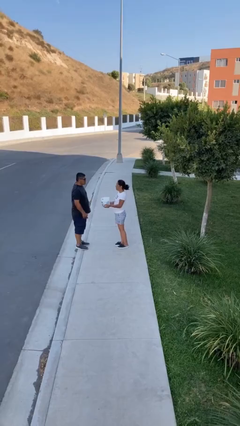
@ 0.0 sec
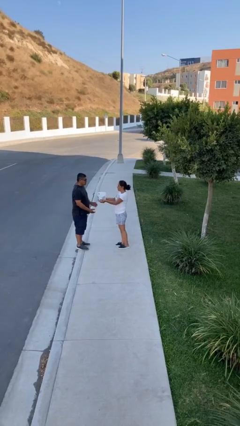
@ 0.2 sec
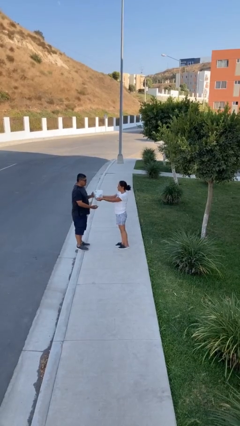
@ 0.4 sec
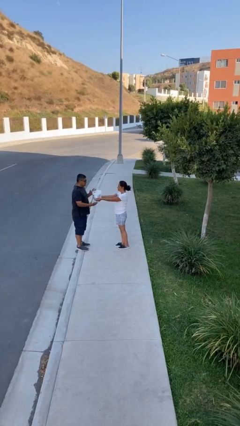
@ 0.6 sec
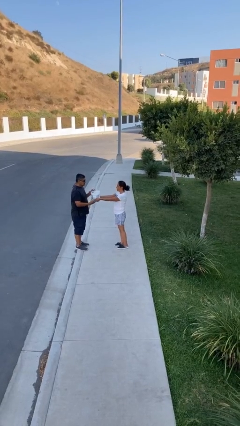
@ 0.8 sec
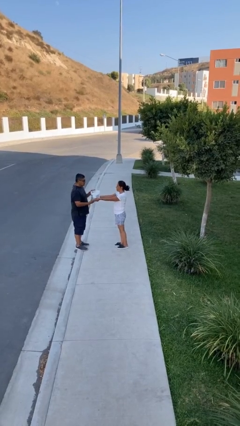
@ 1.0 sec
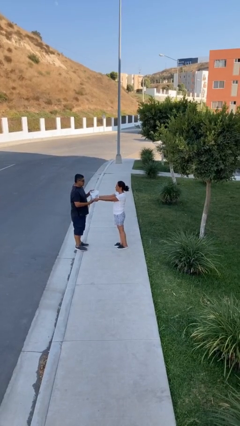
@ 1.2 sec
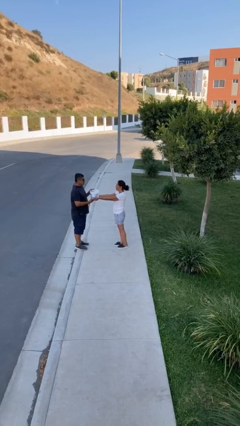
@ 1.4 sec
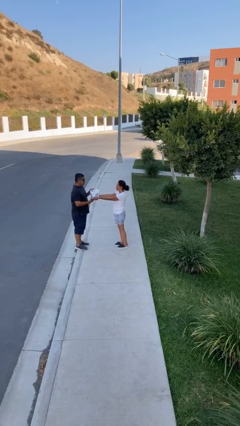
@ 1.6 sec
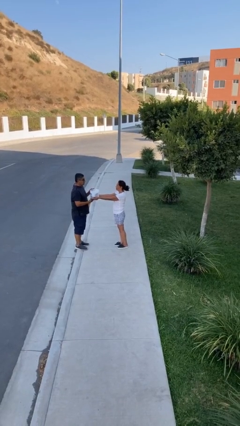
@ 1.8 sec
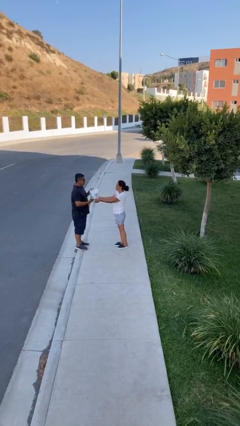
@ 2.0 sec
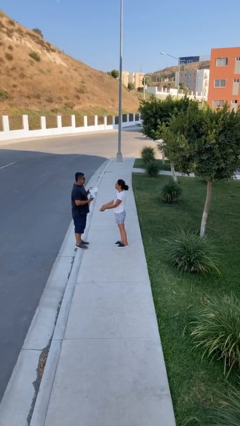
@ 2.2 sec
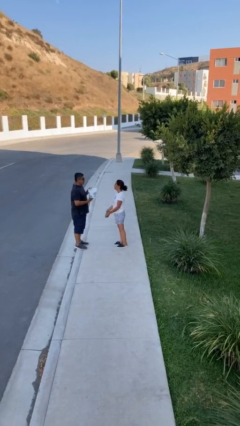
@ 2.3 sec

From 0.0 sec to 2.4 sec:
person transfers object to person

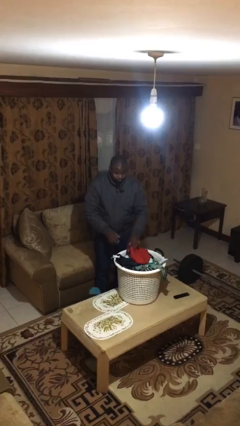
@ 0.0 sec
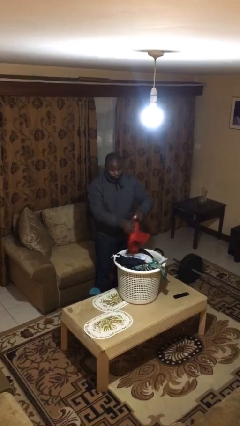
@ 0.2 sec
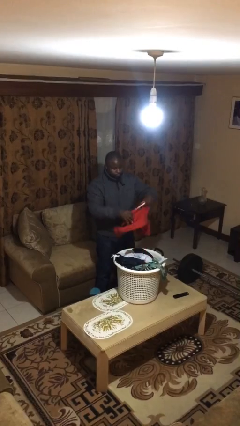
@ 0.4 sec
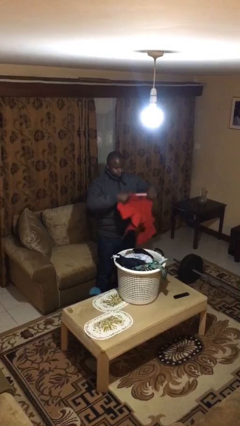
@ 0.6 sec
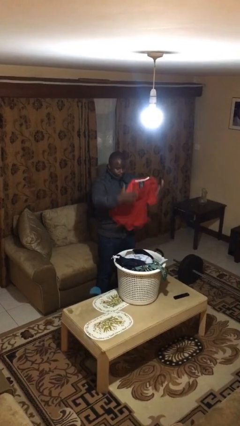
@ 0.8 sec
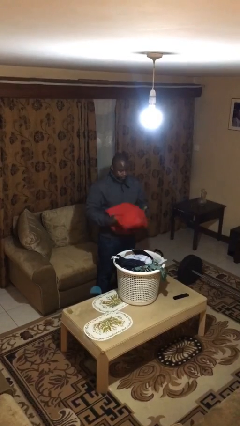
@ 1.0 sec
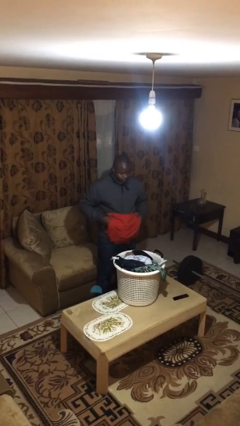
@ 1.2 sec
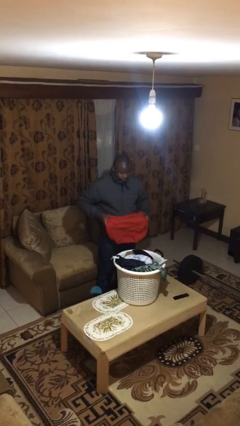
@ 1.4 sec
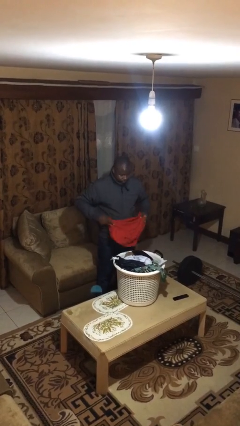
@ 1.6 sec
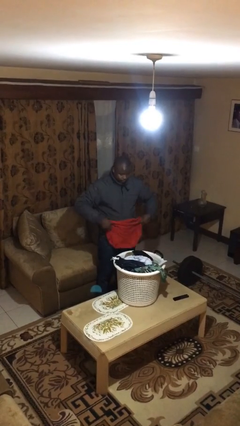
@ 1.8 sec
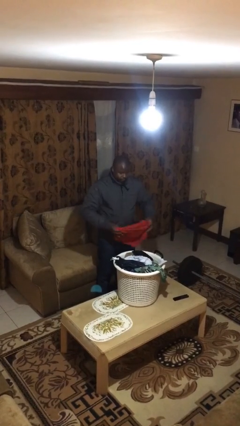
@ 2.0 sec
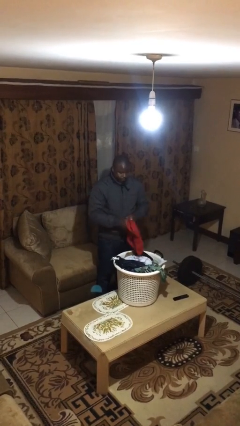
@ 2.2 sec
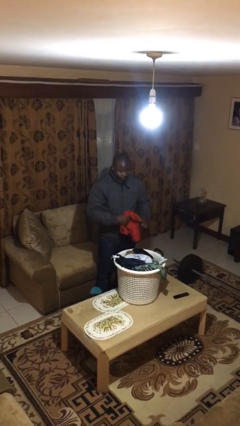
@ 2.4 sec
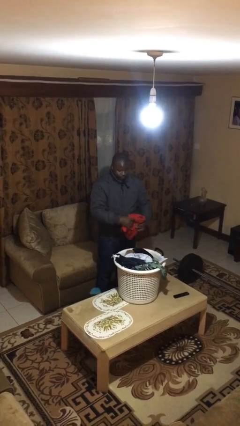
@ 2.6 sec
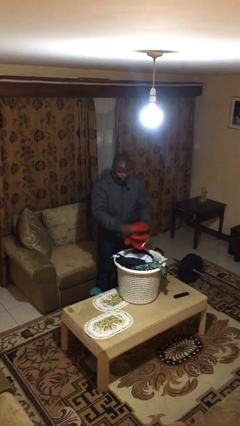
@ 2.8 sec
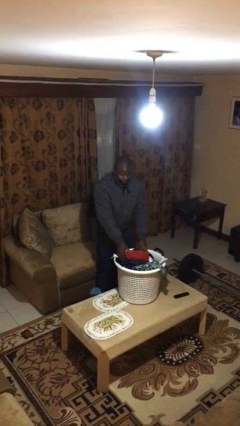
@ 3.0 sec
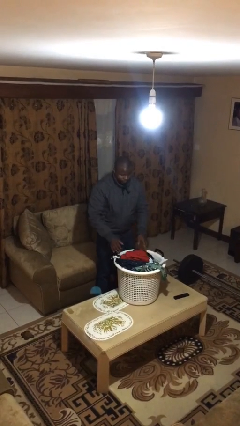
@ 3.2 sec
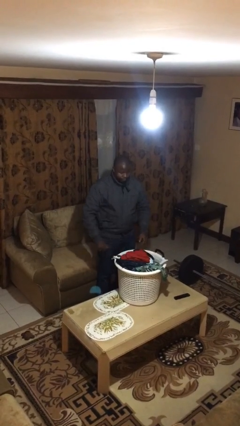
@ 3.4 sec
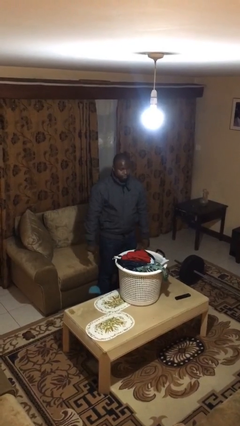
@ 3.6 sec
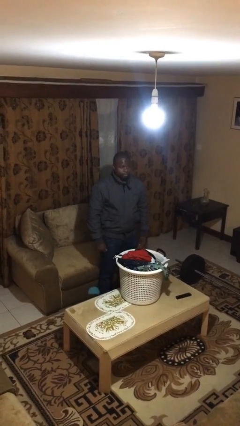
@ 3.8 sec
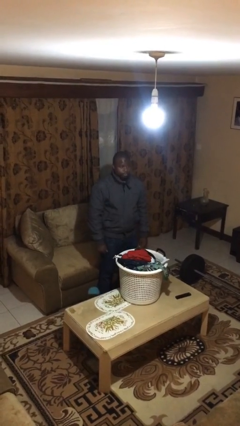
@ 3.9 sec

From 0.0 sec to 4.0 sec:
person folds shirt

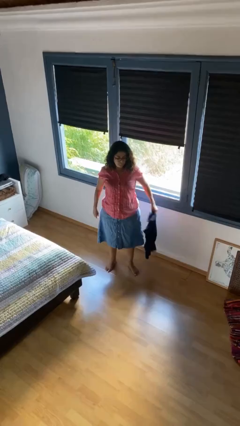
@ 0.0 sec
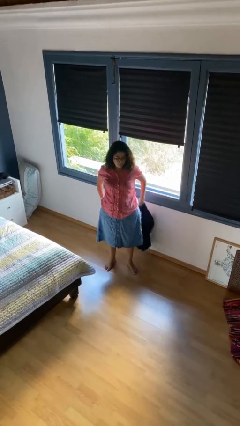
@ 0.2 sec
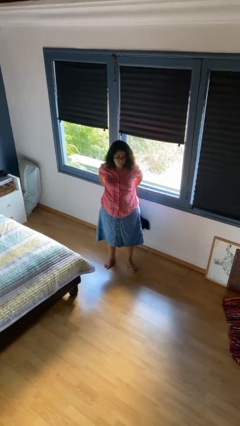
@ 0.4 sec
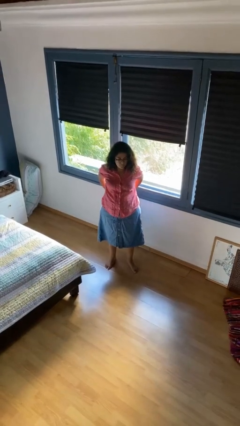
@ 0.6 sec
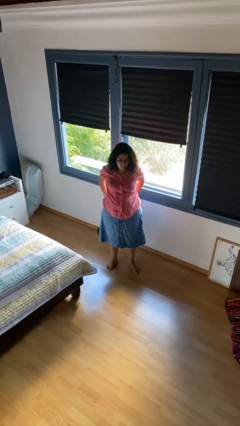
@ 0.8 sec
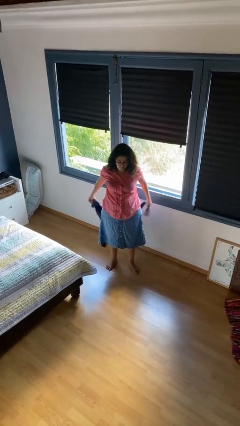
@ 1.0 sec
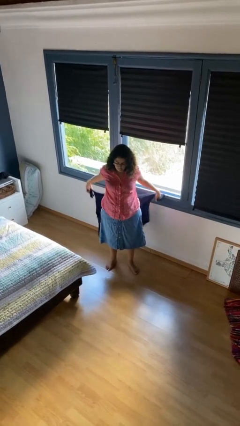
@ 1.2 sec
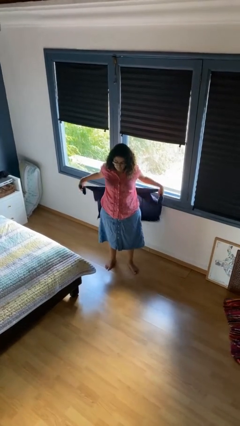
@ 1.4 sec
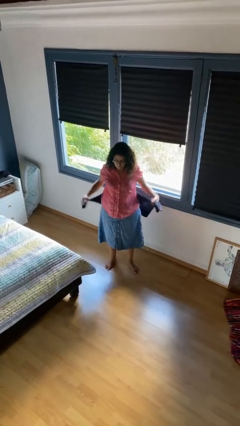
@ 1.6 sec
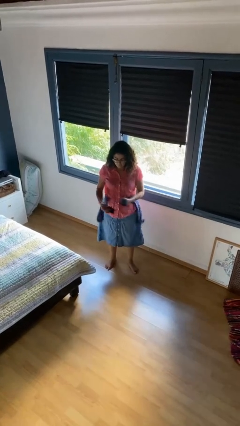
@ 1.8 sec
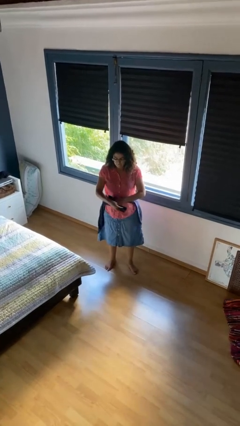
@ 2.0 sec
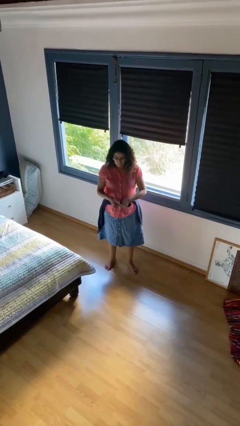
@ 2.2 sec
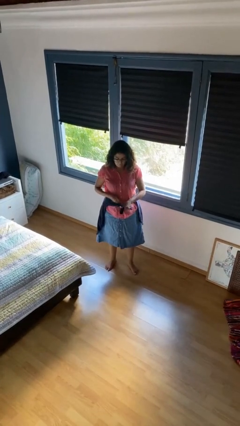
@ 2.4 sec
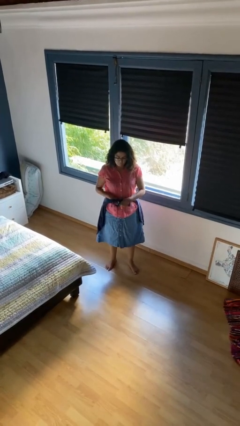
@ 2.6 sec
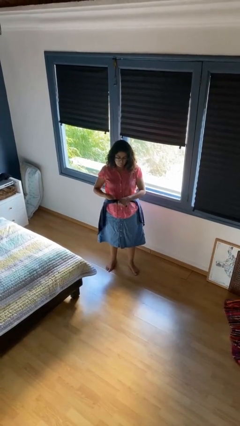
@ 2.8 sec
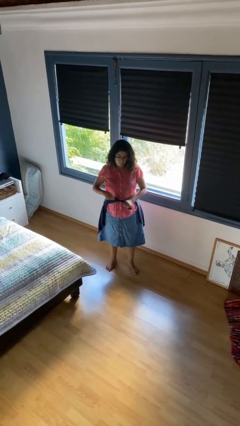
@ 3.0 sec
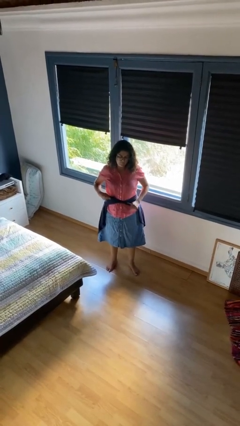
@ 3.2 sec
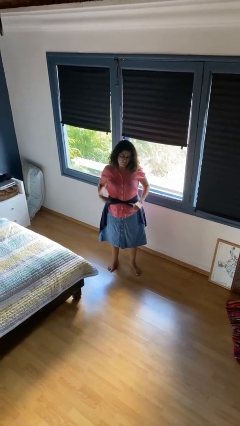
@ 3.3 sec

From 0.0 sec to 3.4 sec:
person ties jacket around waist

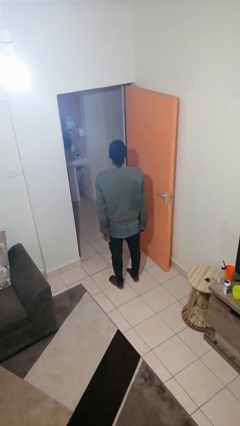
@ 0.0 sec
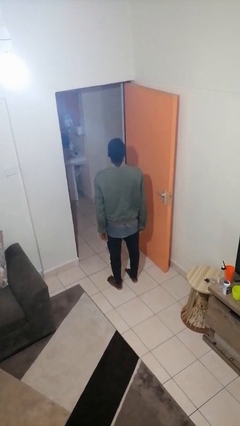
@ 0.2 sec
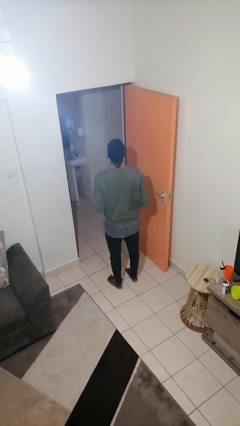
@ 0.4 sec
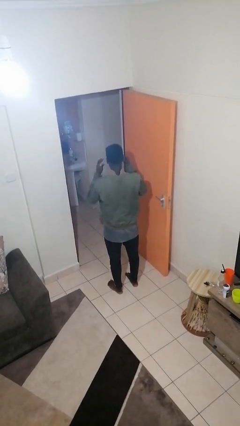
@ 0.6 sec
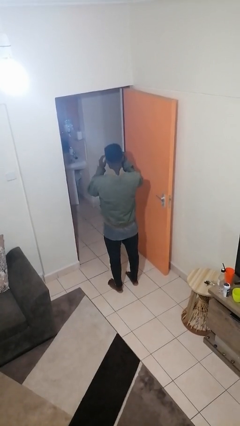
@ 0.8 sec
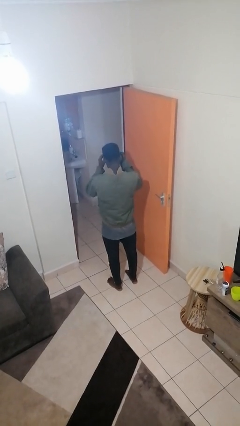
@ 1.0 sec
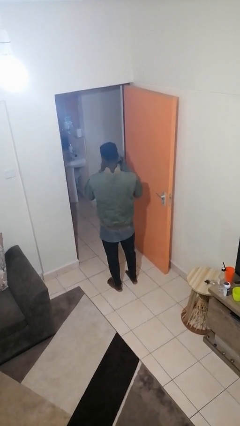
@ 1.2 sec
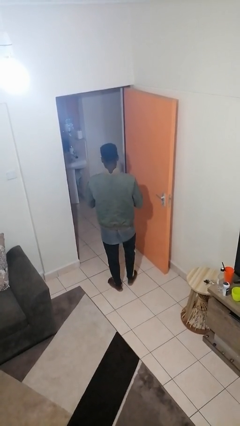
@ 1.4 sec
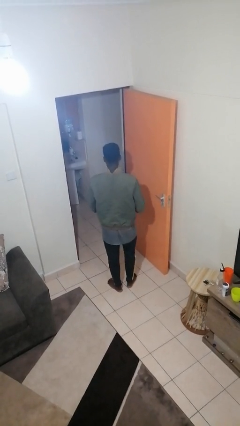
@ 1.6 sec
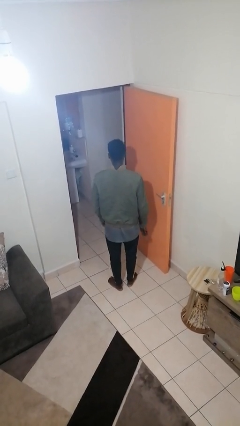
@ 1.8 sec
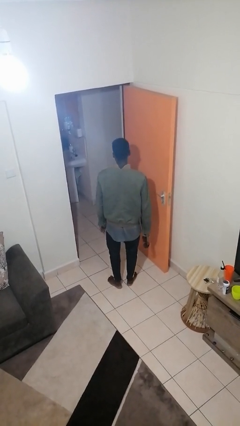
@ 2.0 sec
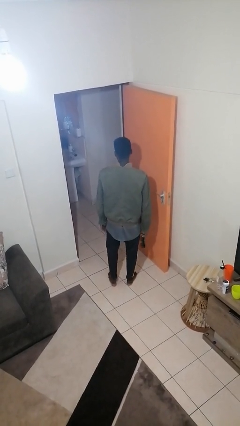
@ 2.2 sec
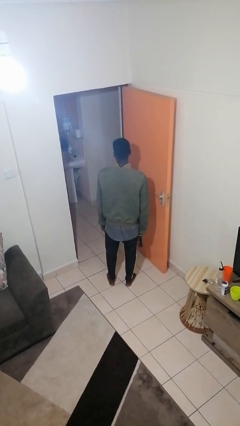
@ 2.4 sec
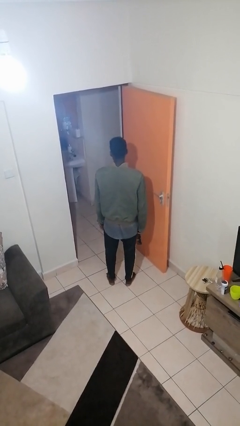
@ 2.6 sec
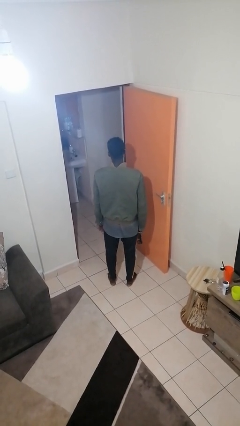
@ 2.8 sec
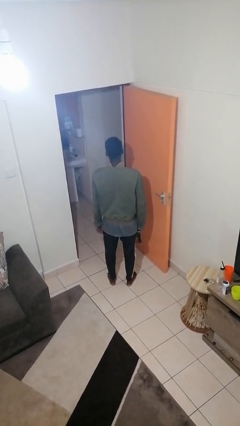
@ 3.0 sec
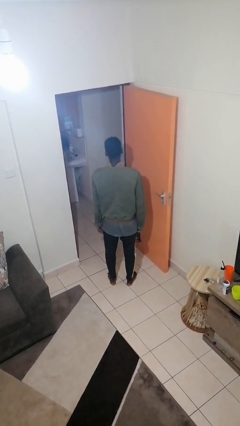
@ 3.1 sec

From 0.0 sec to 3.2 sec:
person takes off sunglasses

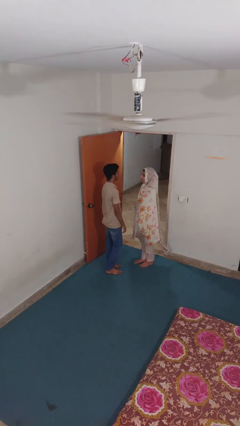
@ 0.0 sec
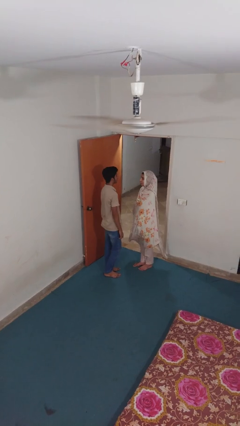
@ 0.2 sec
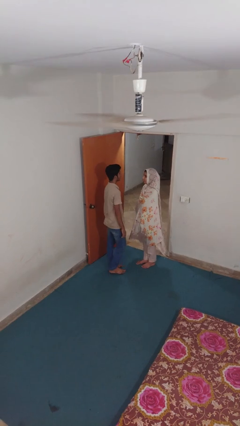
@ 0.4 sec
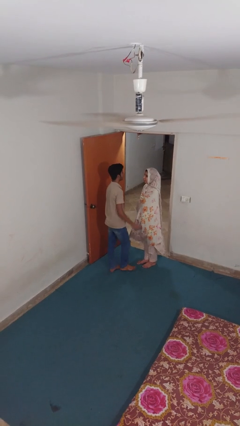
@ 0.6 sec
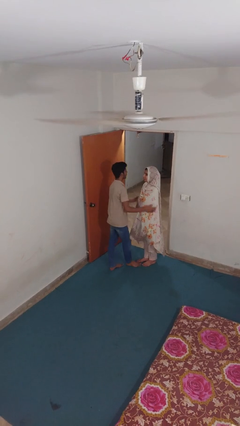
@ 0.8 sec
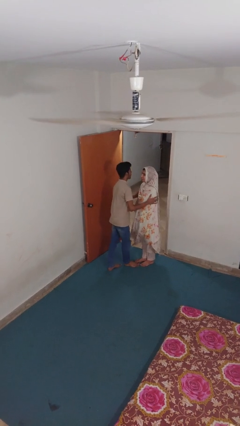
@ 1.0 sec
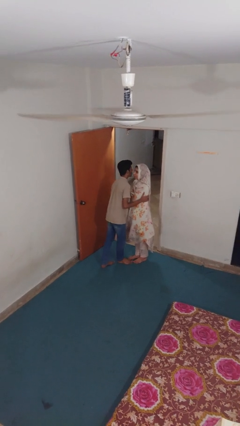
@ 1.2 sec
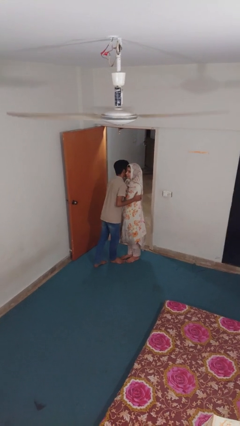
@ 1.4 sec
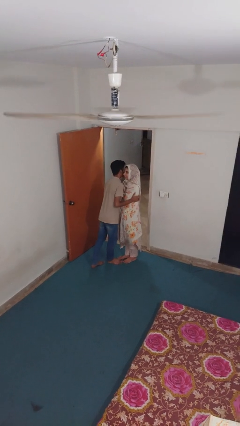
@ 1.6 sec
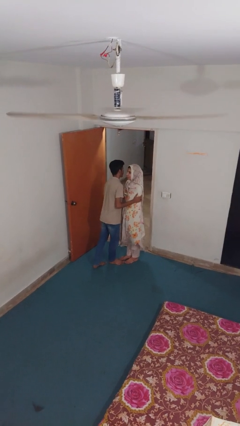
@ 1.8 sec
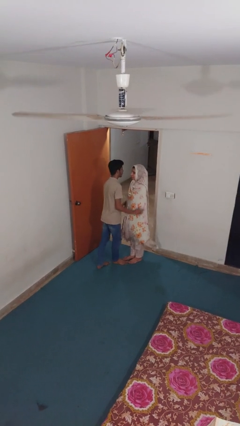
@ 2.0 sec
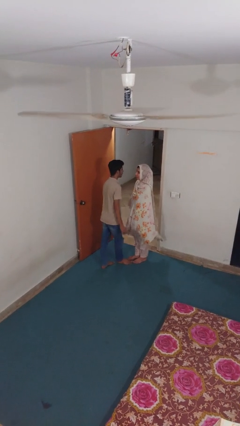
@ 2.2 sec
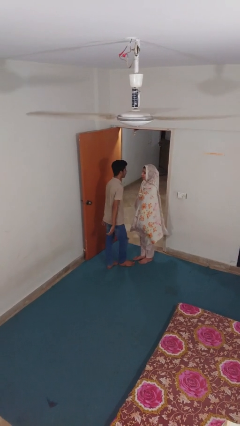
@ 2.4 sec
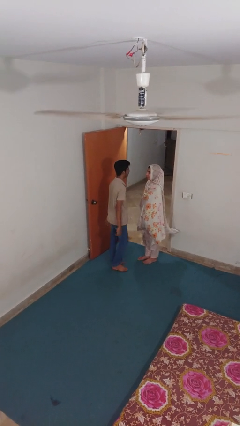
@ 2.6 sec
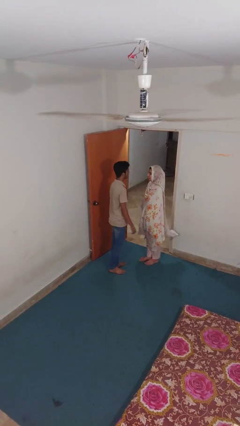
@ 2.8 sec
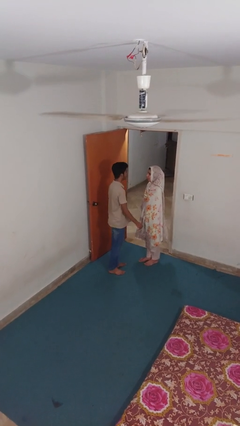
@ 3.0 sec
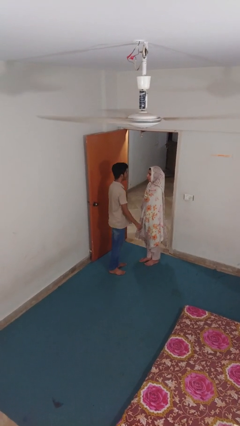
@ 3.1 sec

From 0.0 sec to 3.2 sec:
person kisses cheek of person

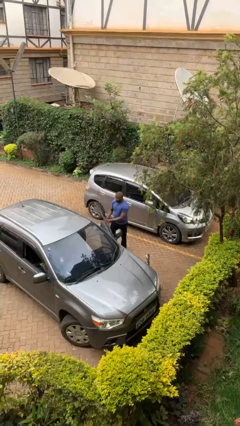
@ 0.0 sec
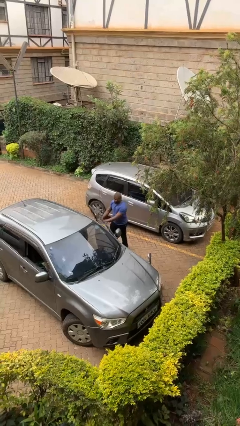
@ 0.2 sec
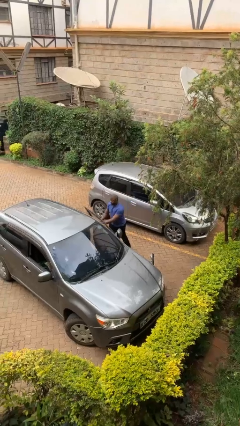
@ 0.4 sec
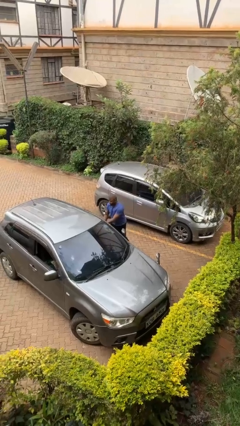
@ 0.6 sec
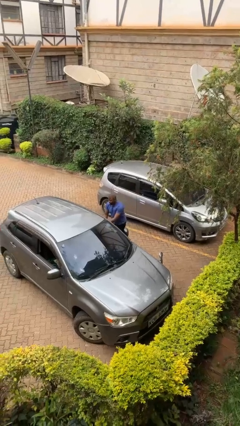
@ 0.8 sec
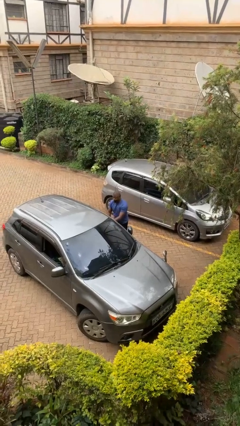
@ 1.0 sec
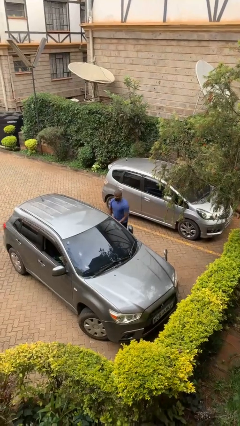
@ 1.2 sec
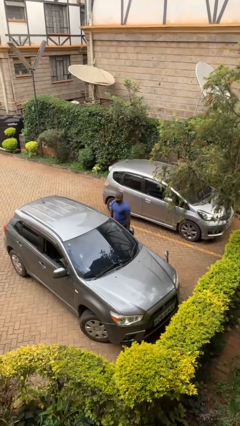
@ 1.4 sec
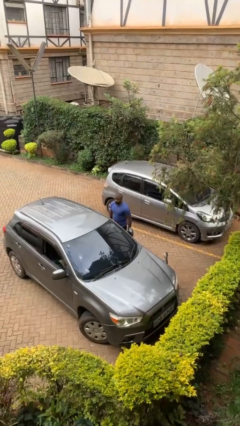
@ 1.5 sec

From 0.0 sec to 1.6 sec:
person closes car door
